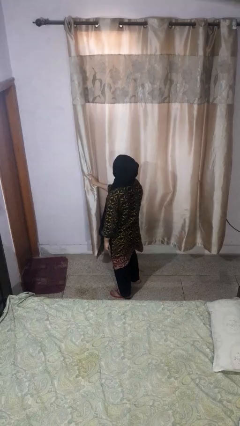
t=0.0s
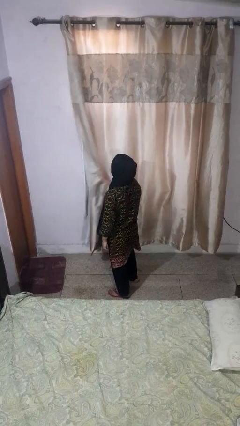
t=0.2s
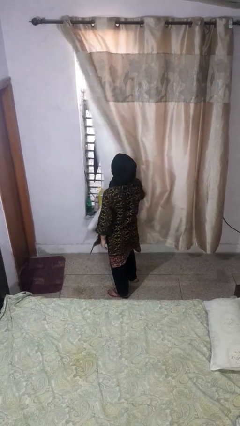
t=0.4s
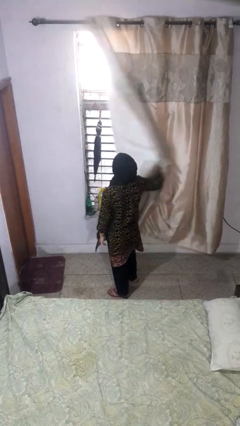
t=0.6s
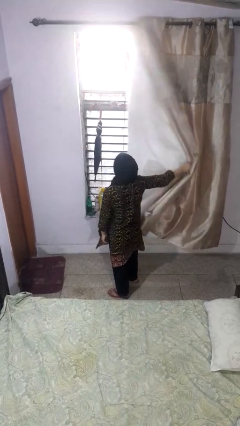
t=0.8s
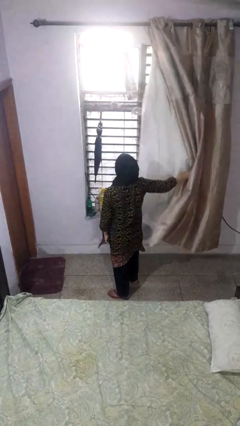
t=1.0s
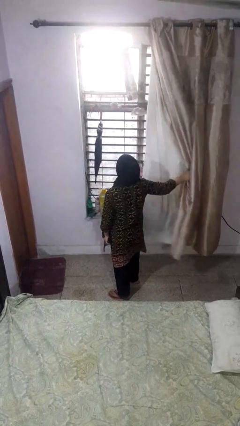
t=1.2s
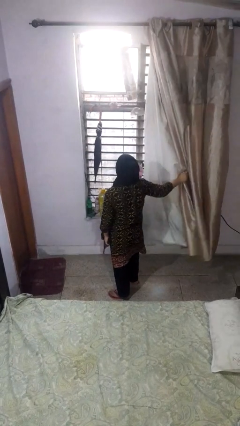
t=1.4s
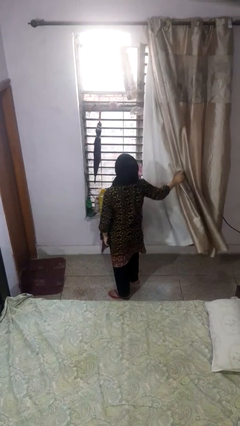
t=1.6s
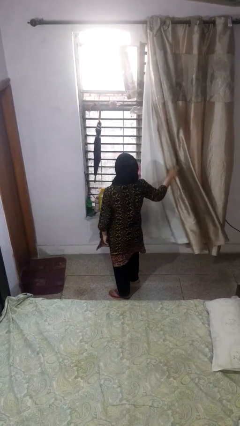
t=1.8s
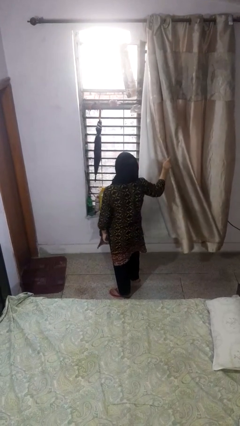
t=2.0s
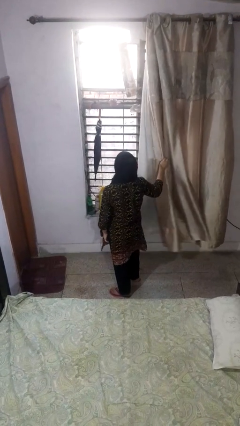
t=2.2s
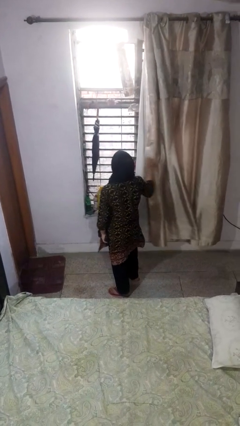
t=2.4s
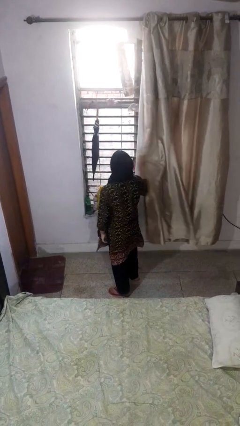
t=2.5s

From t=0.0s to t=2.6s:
person opens curtains

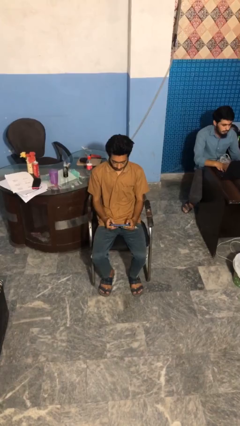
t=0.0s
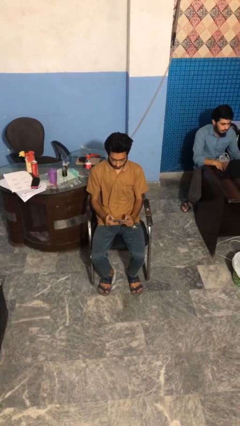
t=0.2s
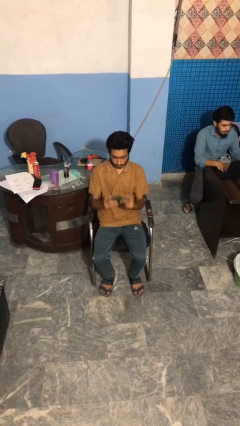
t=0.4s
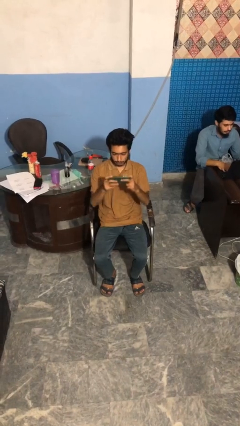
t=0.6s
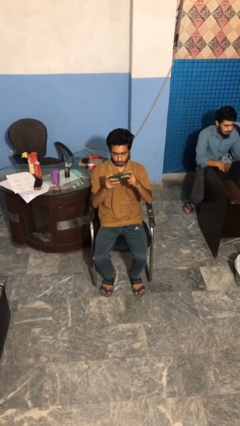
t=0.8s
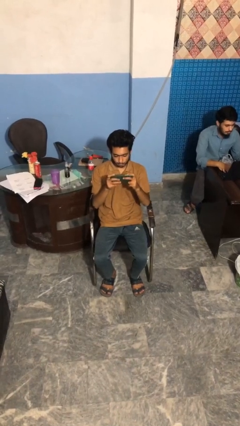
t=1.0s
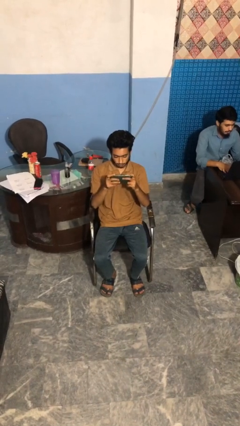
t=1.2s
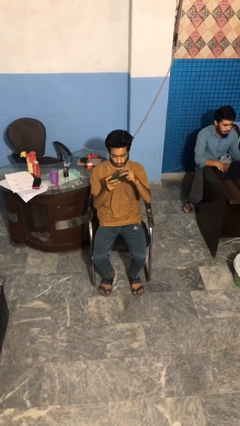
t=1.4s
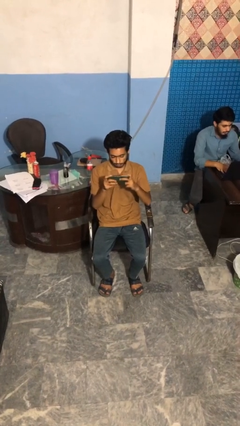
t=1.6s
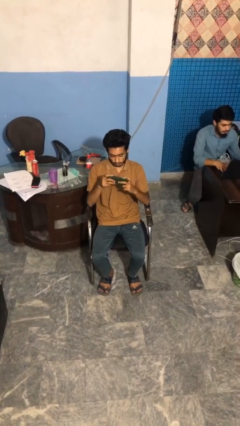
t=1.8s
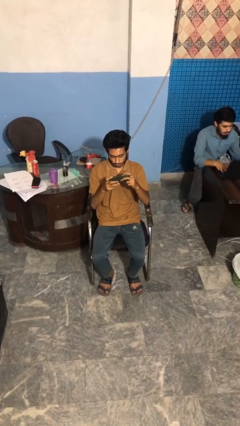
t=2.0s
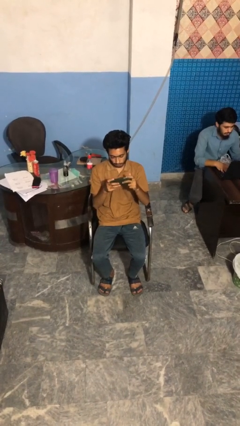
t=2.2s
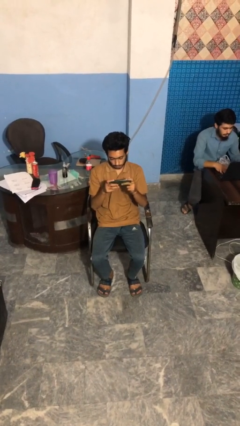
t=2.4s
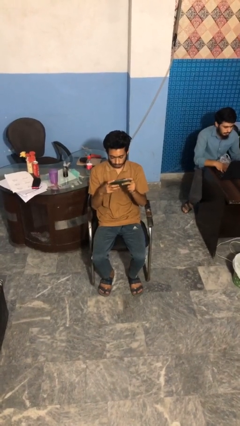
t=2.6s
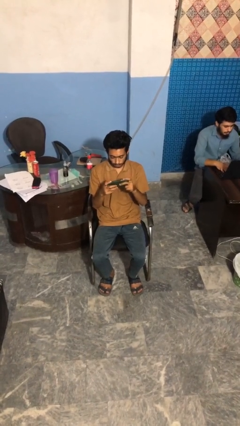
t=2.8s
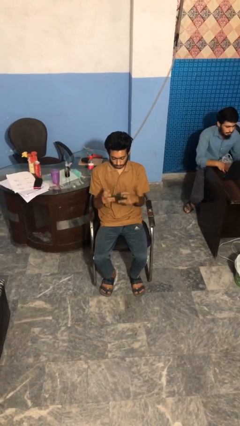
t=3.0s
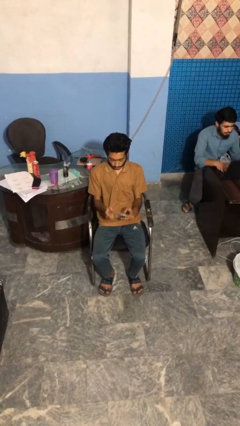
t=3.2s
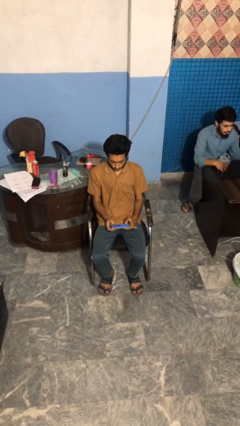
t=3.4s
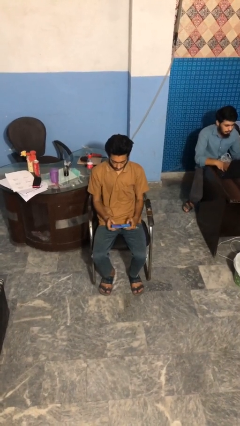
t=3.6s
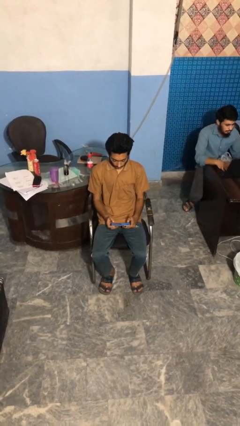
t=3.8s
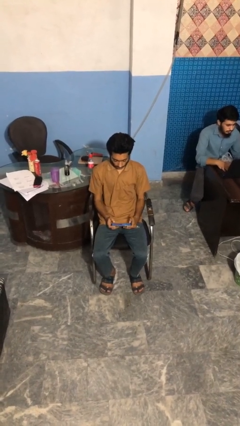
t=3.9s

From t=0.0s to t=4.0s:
person interacts with handheld game

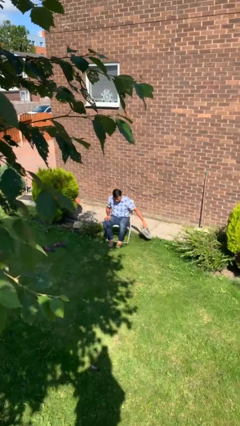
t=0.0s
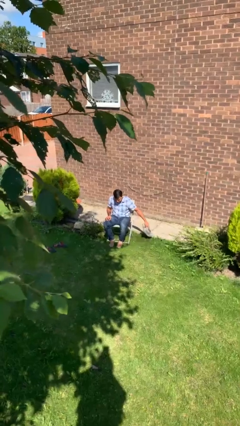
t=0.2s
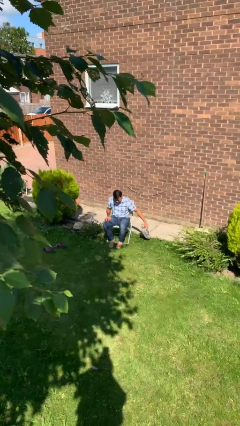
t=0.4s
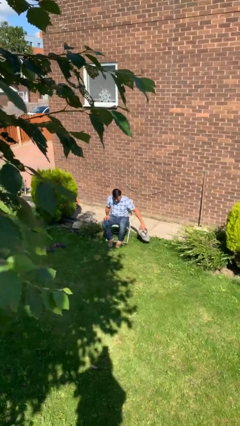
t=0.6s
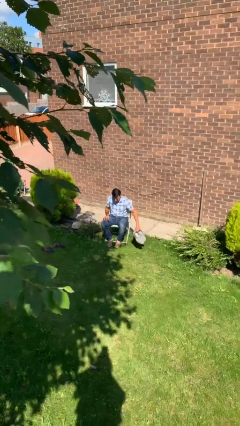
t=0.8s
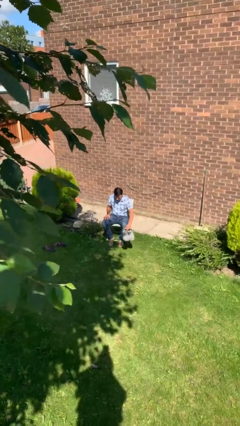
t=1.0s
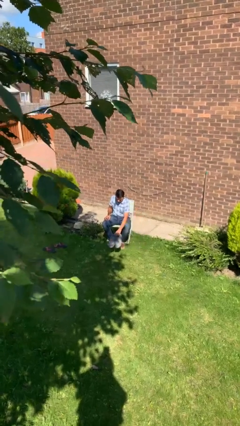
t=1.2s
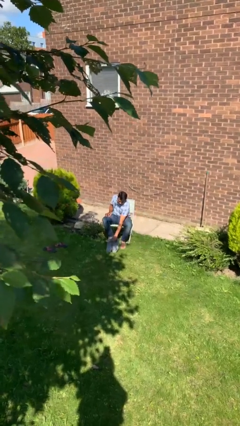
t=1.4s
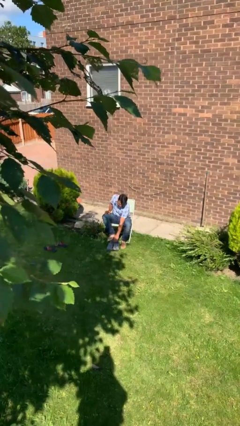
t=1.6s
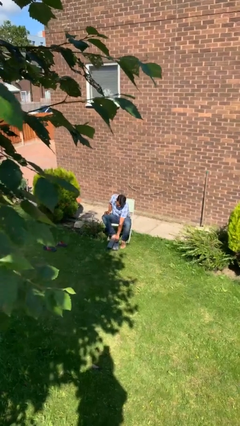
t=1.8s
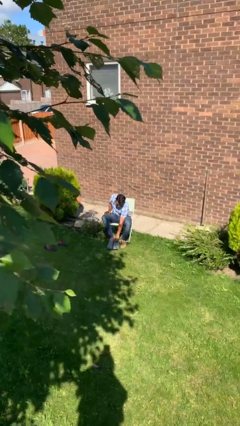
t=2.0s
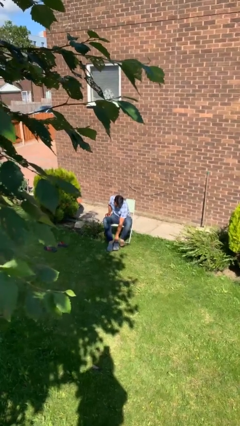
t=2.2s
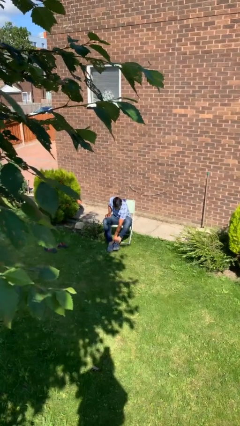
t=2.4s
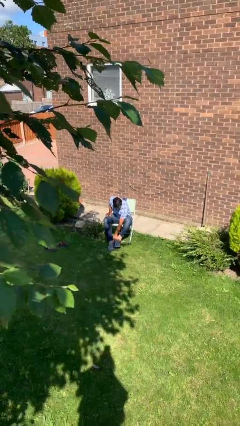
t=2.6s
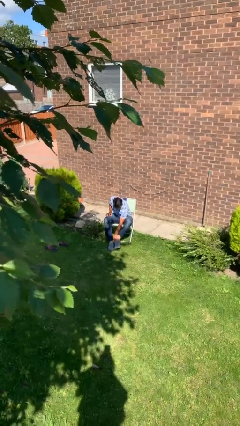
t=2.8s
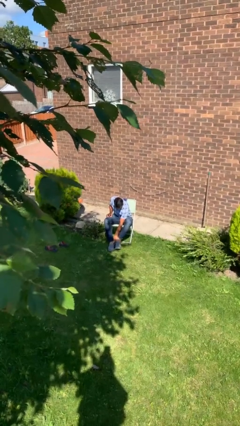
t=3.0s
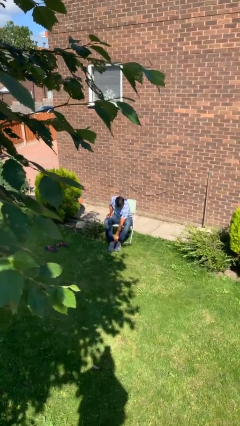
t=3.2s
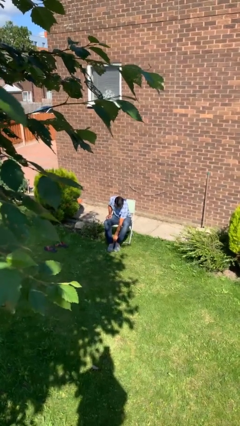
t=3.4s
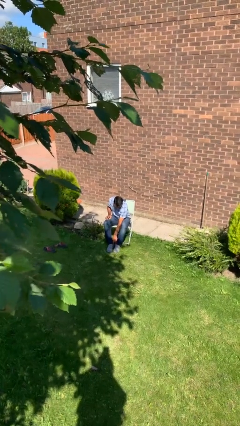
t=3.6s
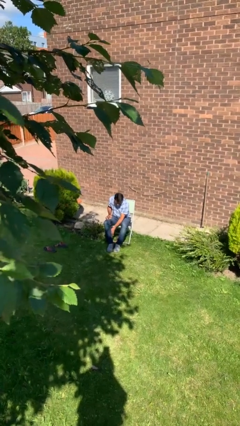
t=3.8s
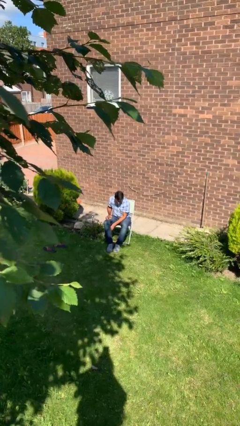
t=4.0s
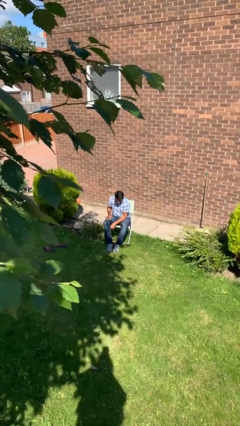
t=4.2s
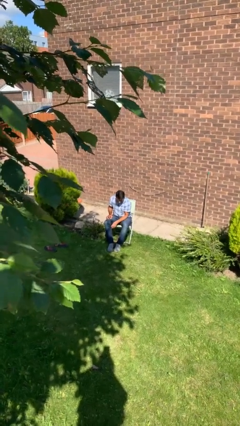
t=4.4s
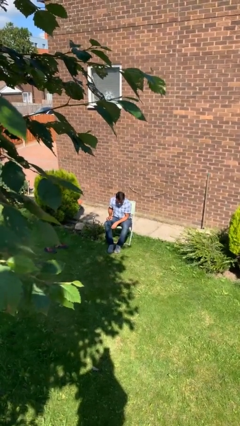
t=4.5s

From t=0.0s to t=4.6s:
person puts on shoes

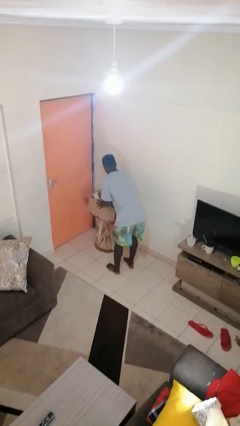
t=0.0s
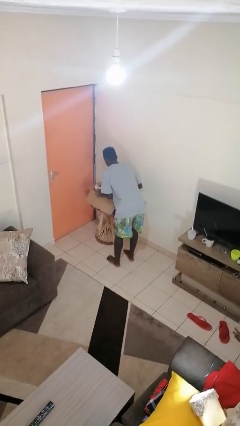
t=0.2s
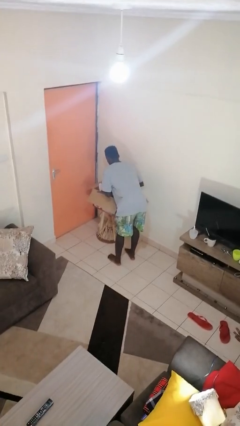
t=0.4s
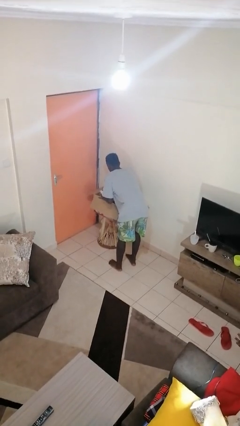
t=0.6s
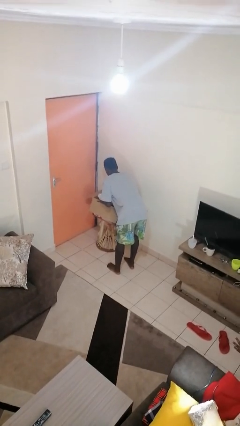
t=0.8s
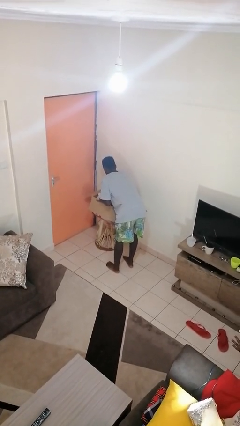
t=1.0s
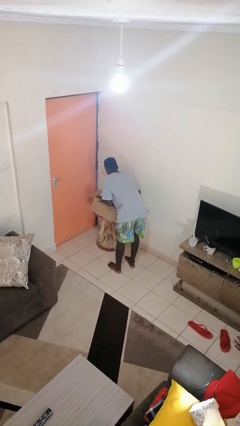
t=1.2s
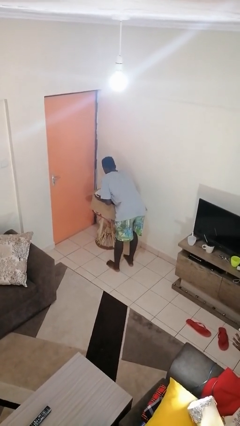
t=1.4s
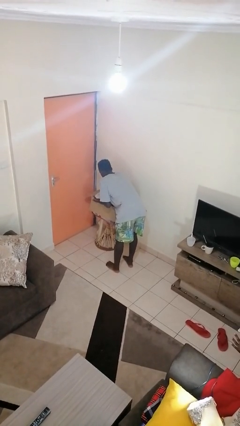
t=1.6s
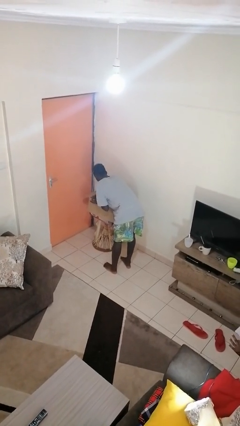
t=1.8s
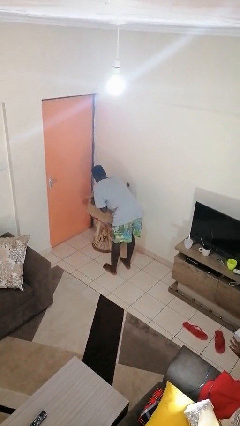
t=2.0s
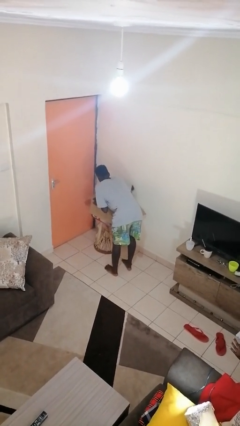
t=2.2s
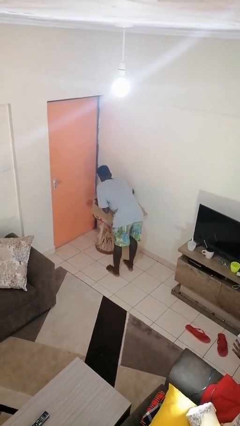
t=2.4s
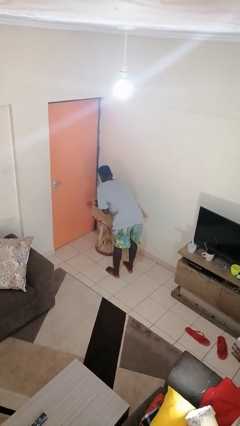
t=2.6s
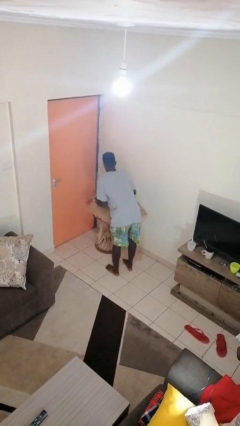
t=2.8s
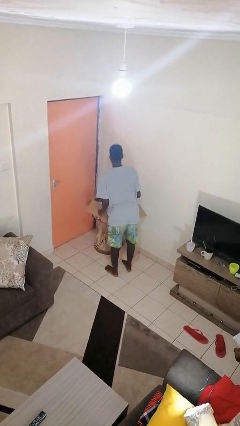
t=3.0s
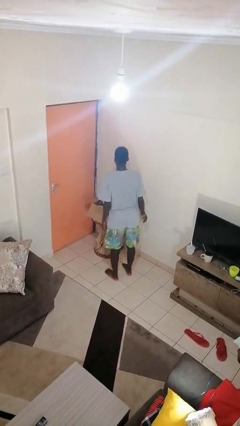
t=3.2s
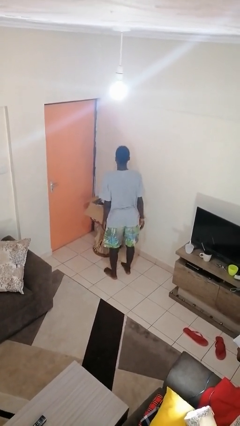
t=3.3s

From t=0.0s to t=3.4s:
person searches in box

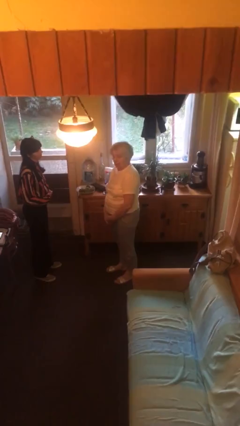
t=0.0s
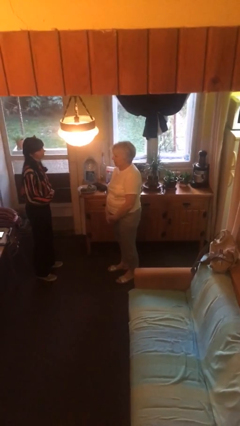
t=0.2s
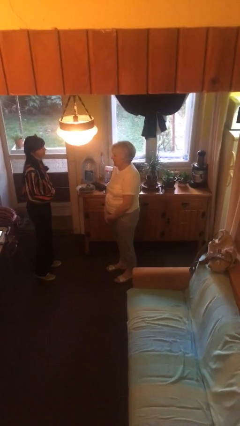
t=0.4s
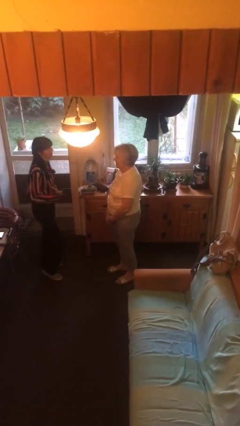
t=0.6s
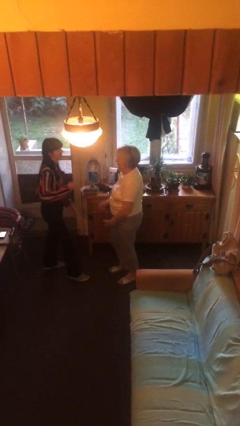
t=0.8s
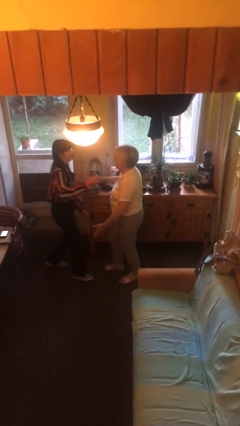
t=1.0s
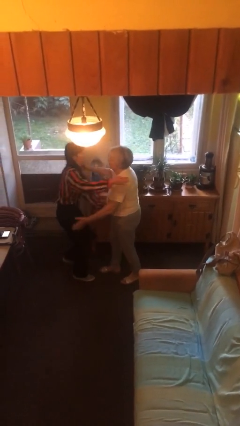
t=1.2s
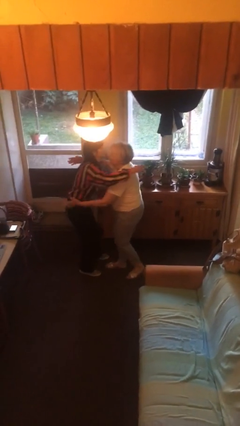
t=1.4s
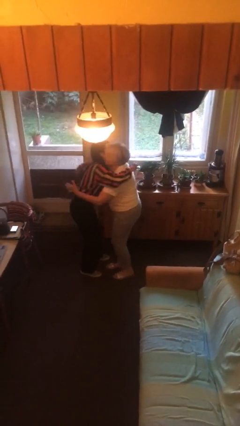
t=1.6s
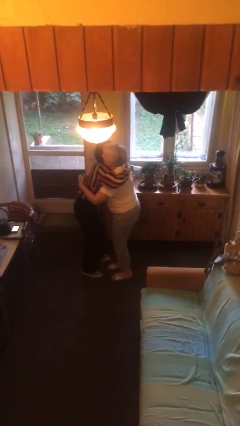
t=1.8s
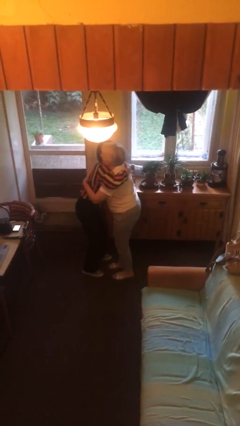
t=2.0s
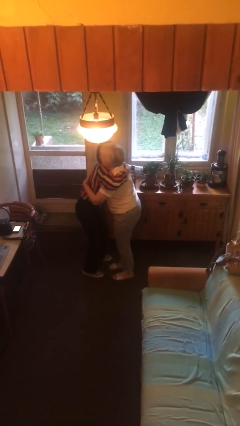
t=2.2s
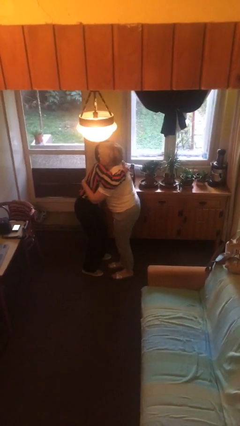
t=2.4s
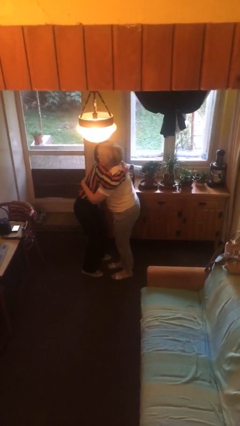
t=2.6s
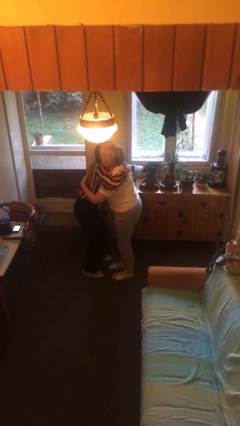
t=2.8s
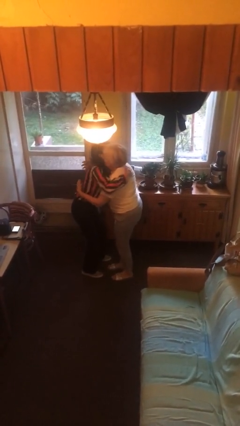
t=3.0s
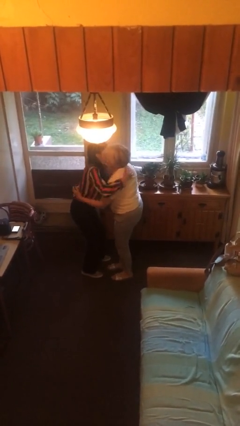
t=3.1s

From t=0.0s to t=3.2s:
person embraces person

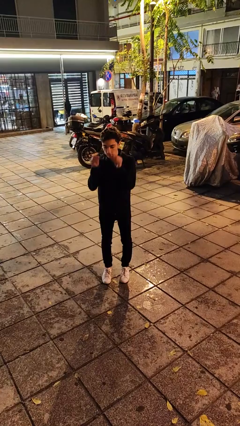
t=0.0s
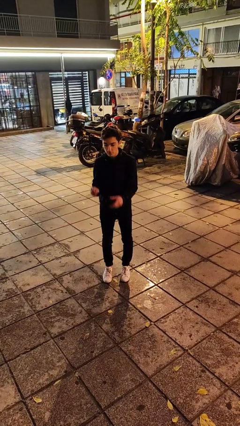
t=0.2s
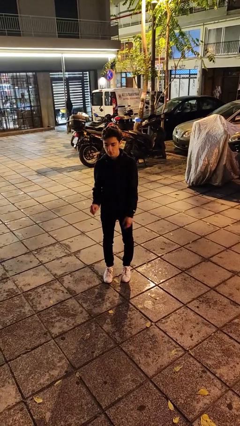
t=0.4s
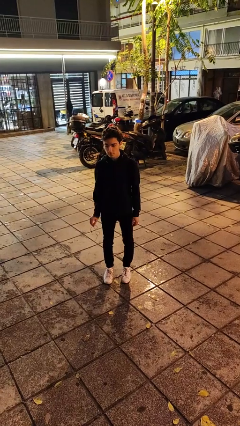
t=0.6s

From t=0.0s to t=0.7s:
person takes off glasses
